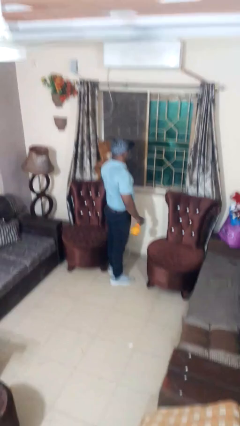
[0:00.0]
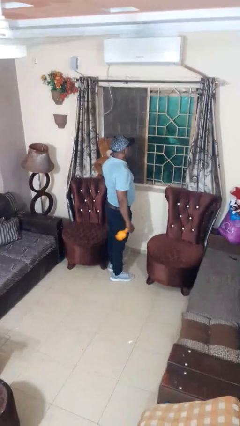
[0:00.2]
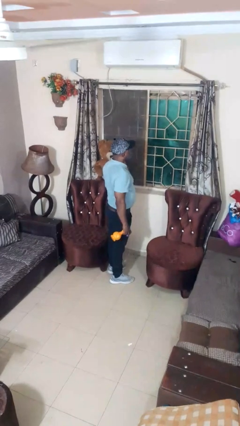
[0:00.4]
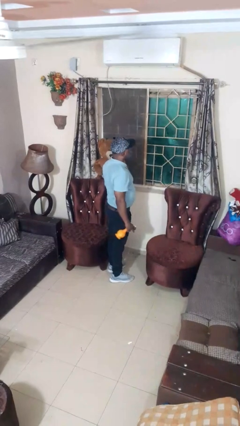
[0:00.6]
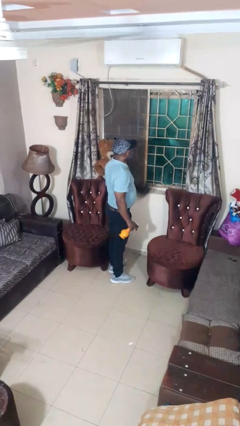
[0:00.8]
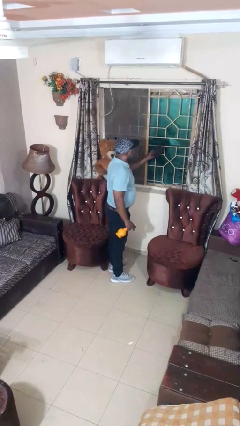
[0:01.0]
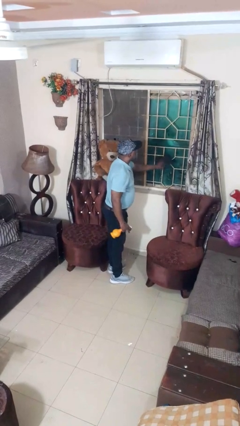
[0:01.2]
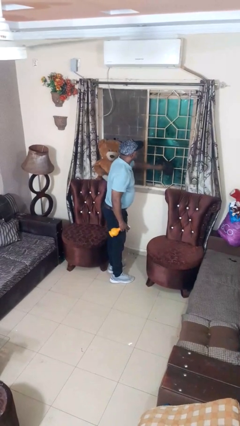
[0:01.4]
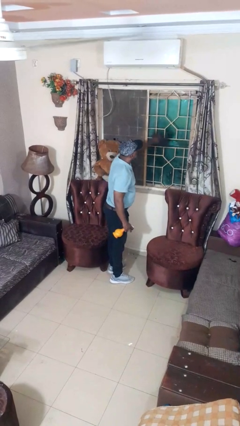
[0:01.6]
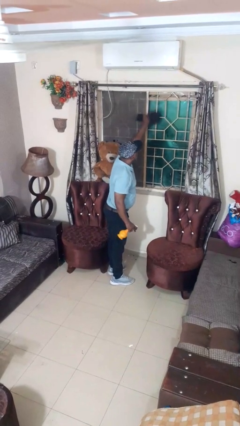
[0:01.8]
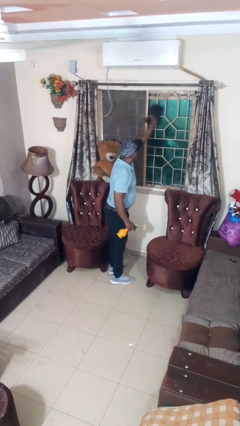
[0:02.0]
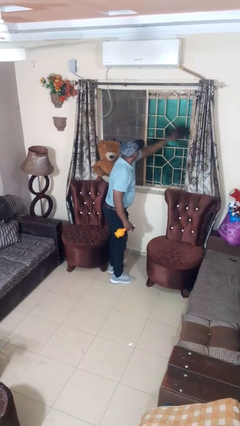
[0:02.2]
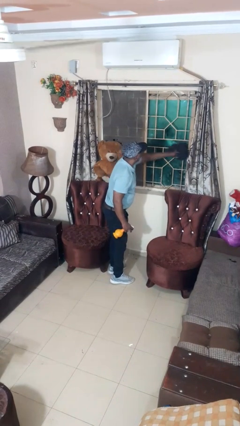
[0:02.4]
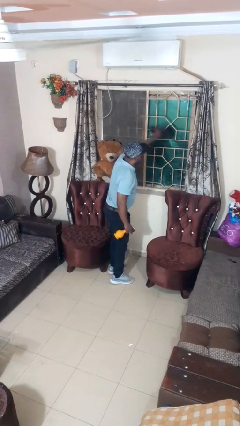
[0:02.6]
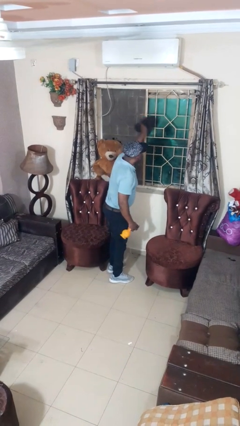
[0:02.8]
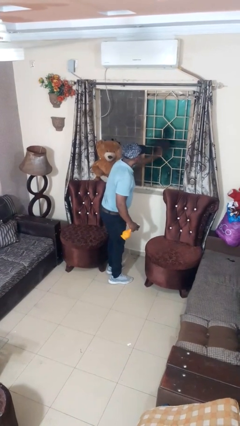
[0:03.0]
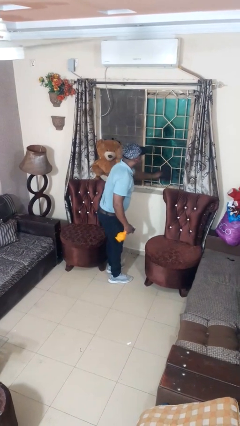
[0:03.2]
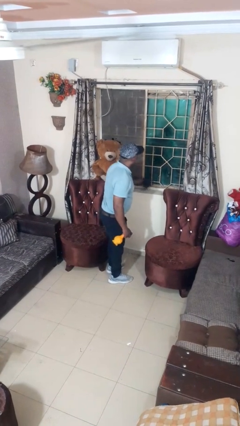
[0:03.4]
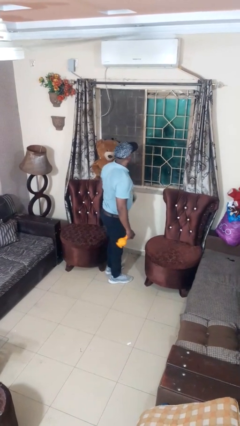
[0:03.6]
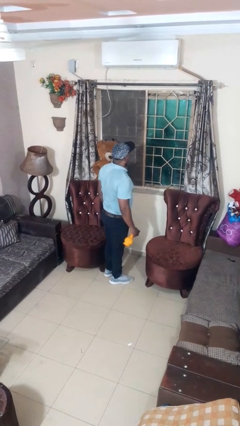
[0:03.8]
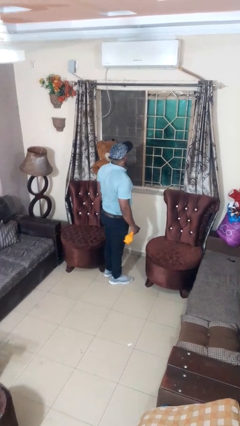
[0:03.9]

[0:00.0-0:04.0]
person washes window

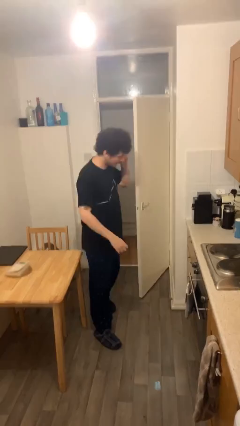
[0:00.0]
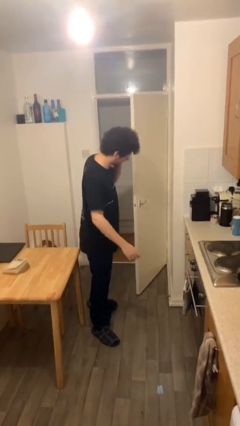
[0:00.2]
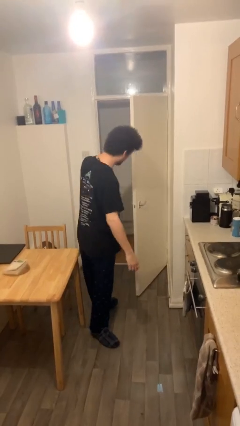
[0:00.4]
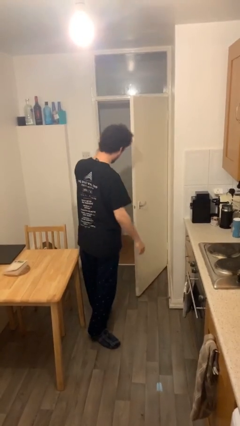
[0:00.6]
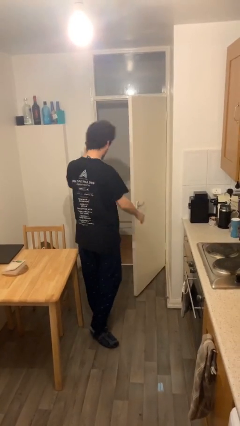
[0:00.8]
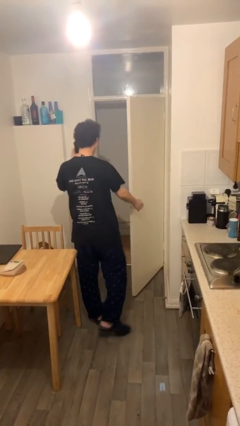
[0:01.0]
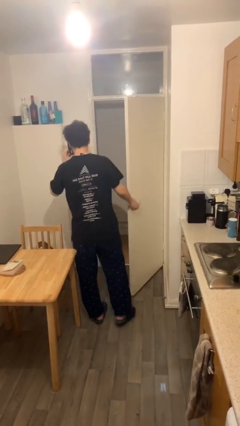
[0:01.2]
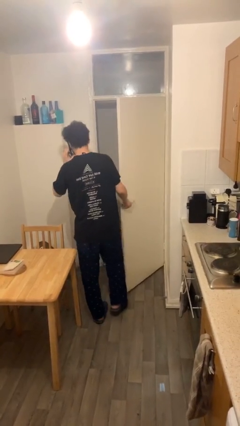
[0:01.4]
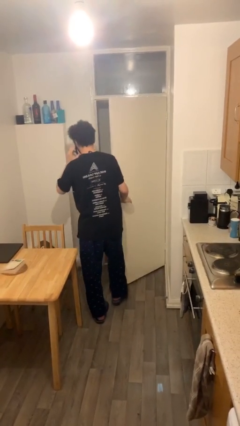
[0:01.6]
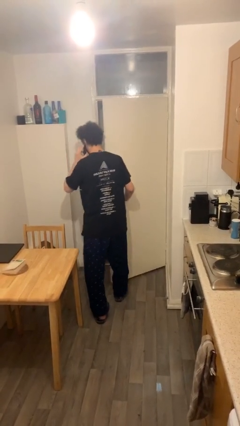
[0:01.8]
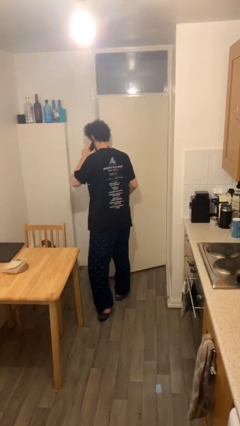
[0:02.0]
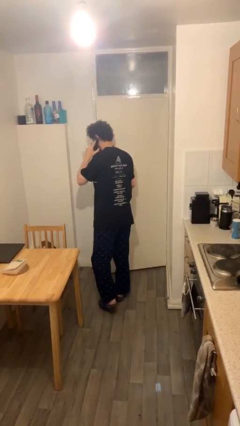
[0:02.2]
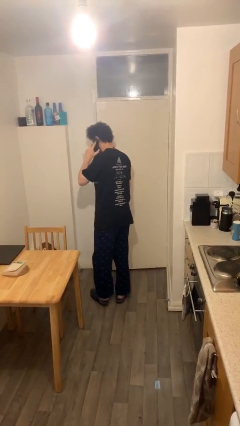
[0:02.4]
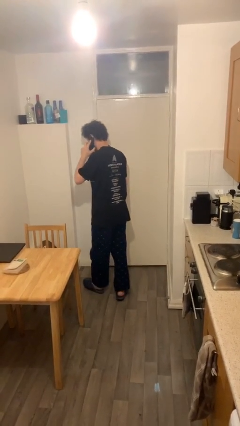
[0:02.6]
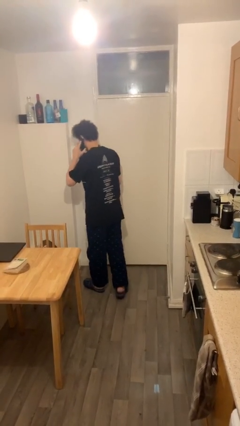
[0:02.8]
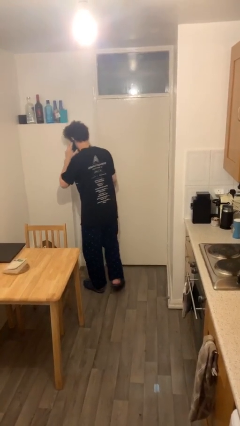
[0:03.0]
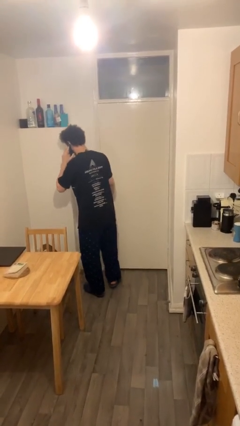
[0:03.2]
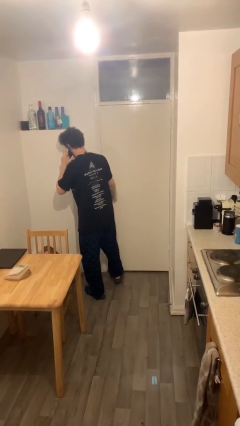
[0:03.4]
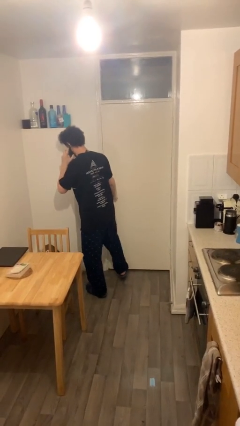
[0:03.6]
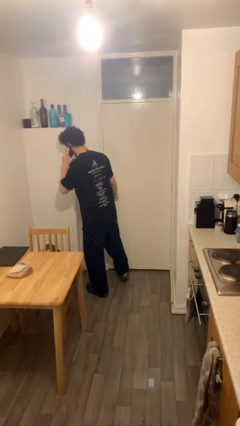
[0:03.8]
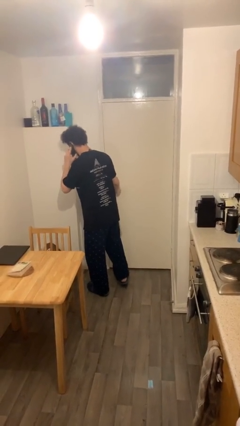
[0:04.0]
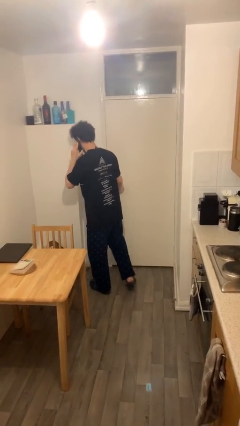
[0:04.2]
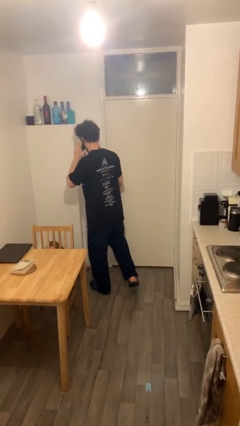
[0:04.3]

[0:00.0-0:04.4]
person closes facility door

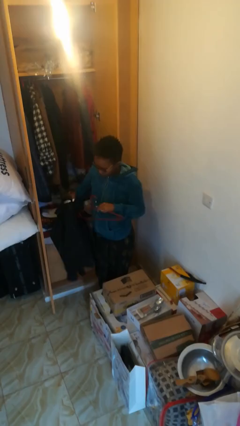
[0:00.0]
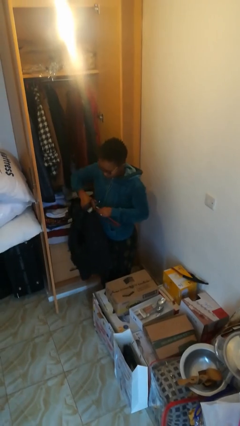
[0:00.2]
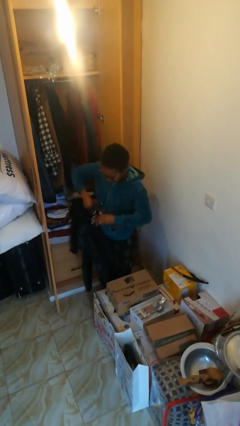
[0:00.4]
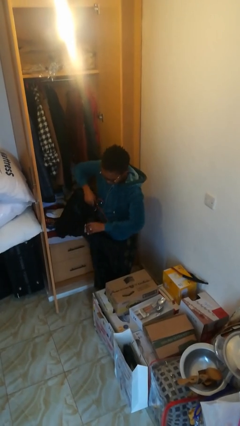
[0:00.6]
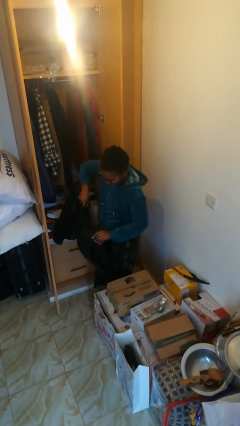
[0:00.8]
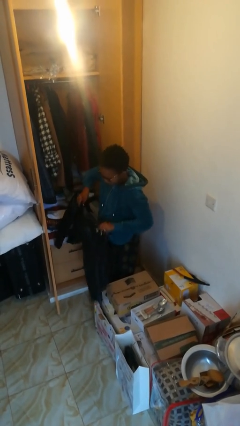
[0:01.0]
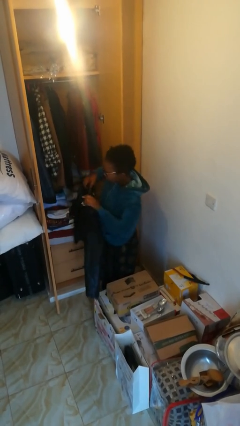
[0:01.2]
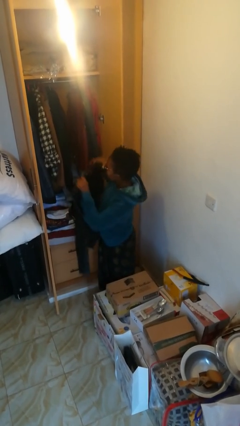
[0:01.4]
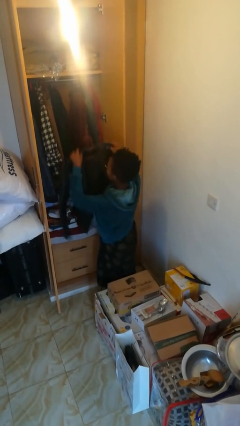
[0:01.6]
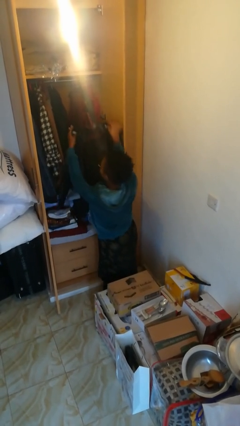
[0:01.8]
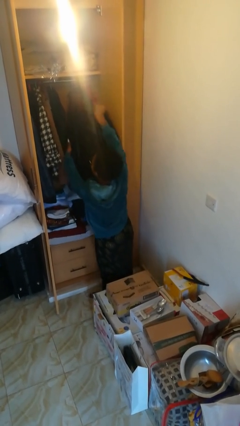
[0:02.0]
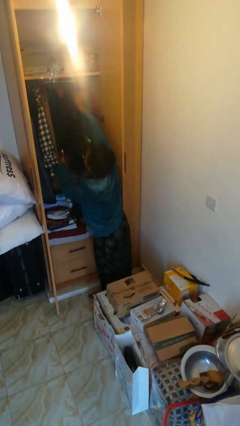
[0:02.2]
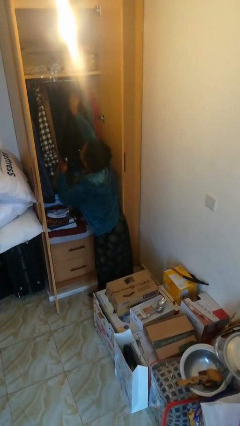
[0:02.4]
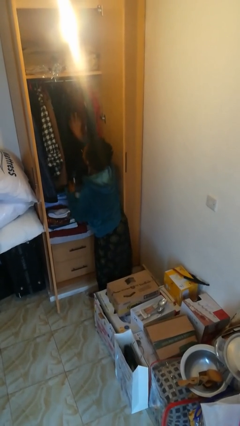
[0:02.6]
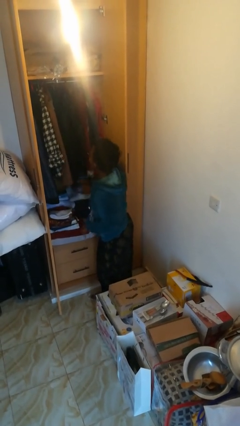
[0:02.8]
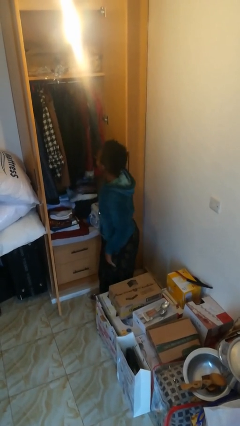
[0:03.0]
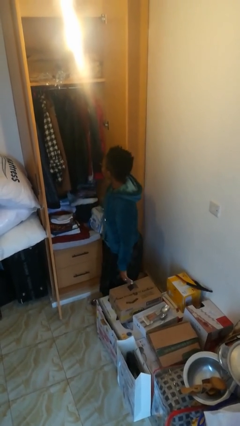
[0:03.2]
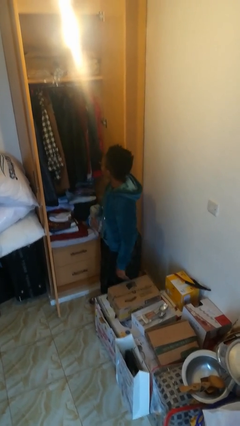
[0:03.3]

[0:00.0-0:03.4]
person puts clothes into closet

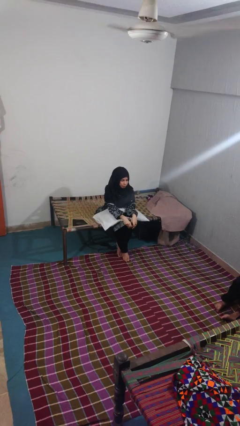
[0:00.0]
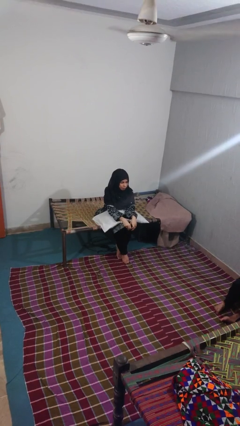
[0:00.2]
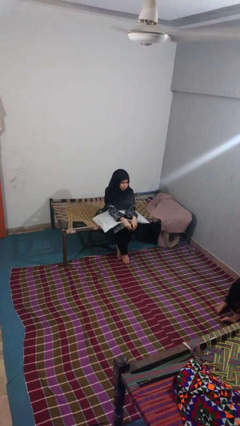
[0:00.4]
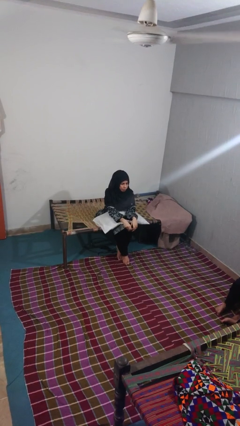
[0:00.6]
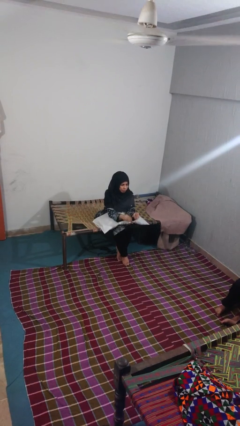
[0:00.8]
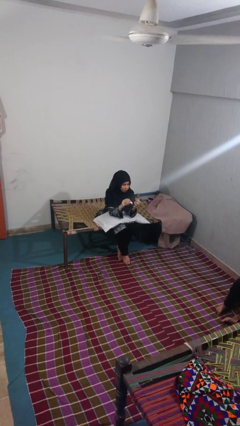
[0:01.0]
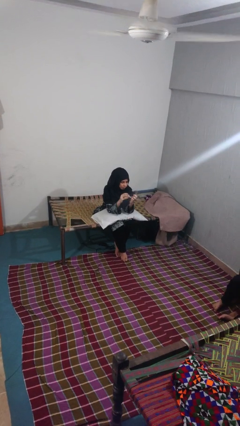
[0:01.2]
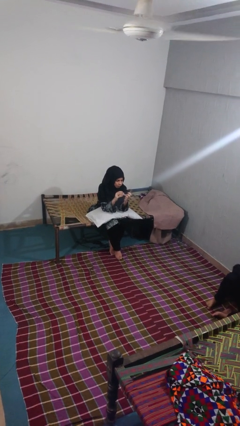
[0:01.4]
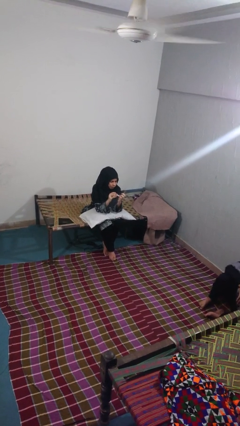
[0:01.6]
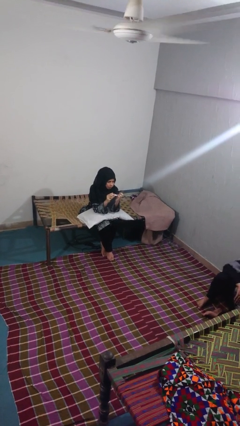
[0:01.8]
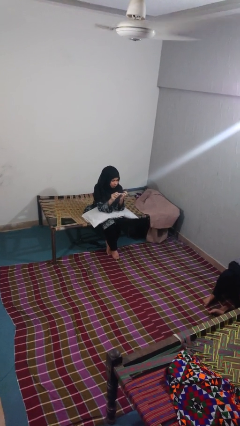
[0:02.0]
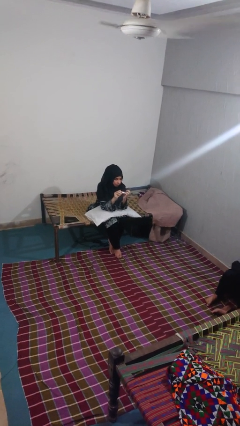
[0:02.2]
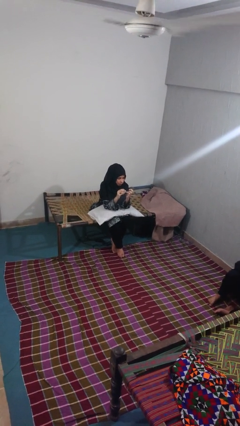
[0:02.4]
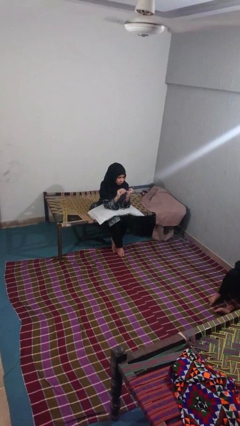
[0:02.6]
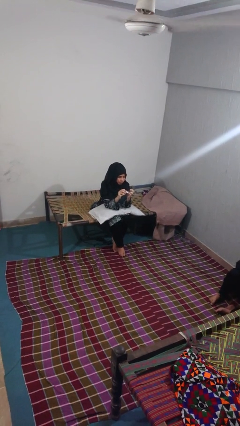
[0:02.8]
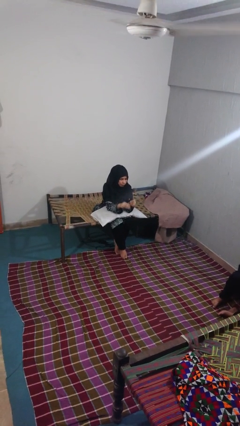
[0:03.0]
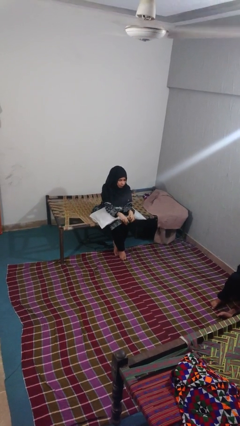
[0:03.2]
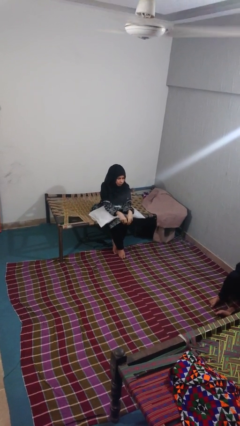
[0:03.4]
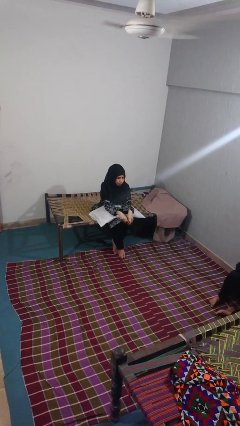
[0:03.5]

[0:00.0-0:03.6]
person clips fingernails

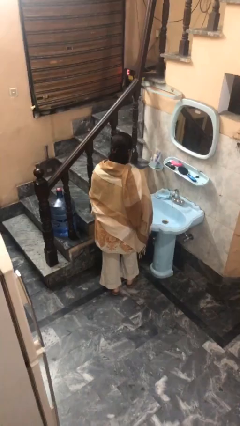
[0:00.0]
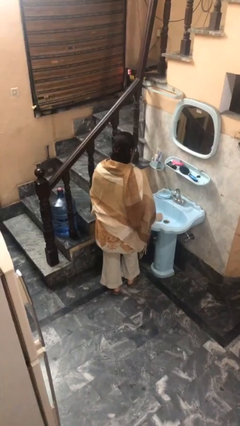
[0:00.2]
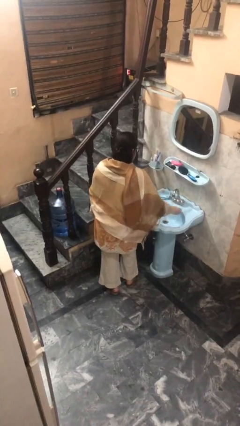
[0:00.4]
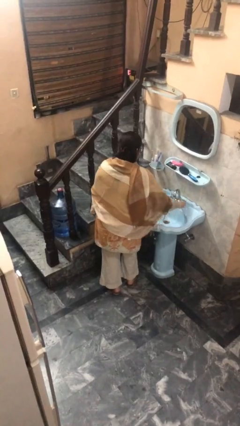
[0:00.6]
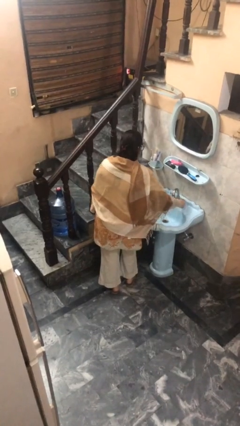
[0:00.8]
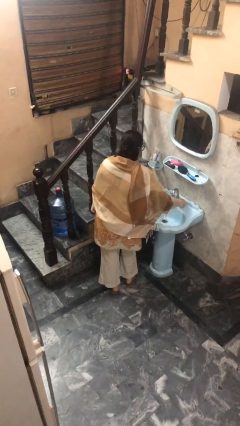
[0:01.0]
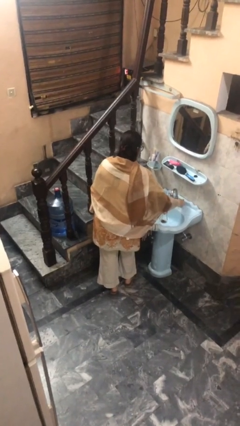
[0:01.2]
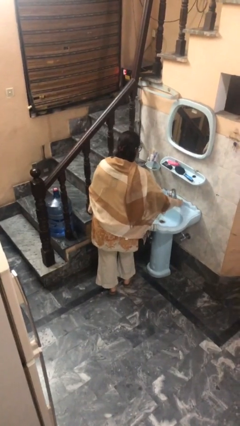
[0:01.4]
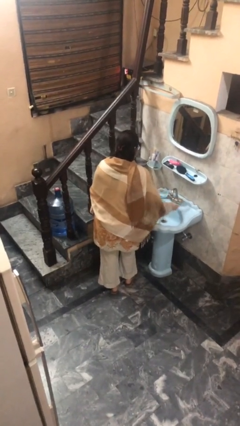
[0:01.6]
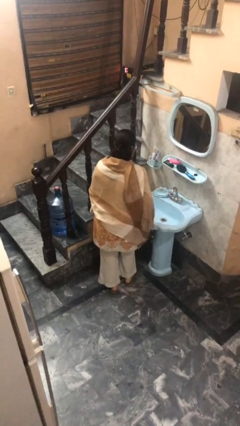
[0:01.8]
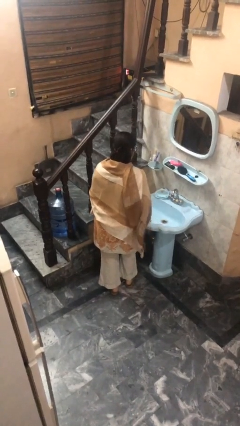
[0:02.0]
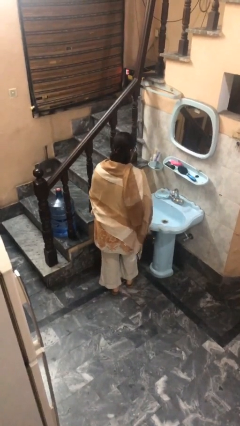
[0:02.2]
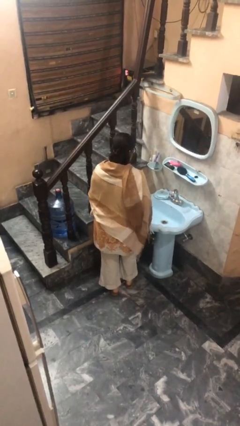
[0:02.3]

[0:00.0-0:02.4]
person turns off faucet
